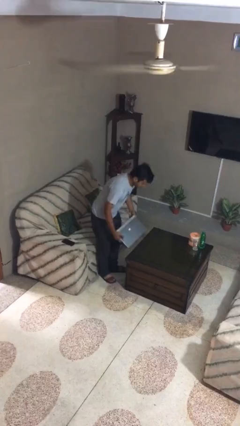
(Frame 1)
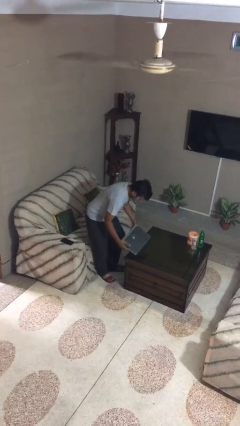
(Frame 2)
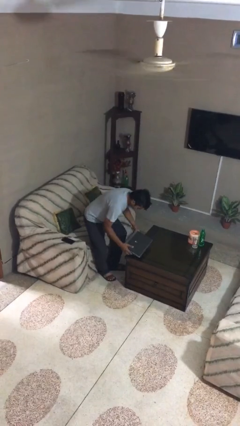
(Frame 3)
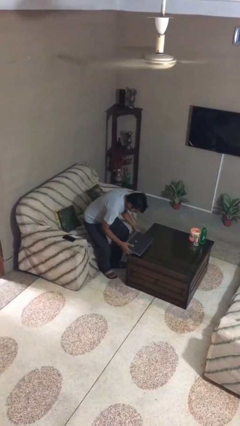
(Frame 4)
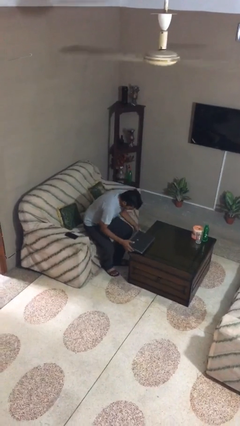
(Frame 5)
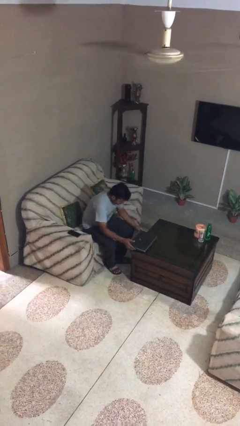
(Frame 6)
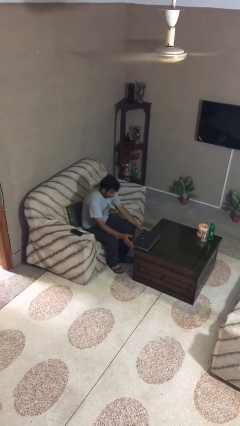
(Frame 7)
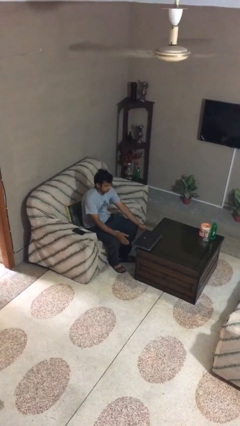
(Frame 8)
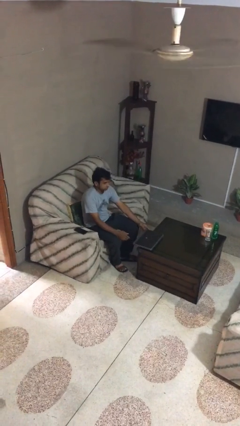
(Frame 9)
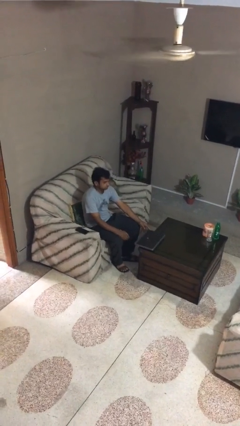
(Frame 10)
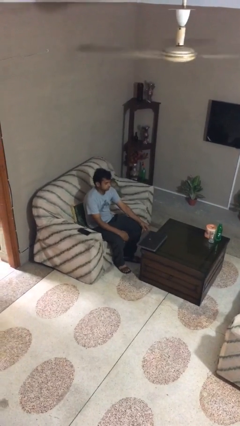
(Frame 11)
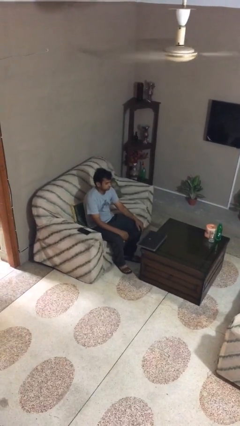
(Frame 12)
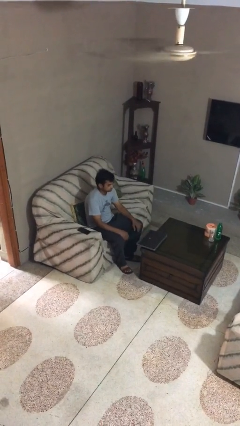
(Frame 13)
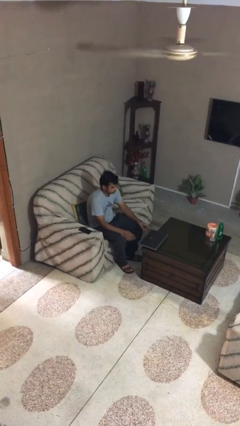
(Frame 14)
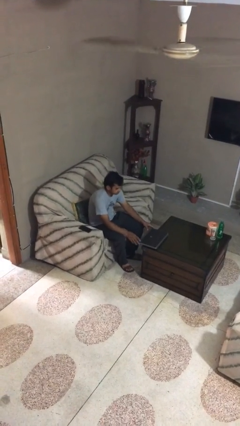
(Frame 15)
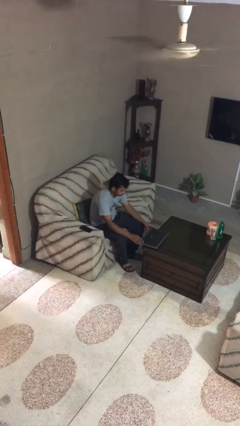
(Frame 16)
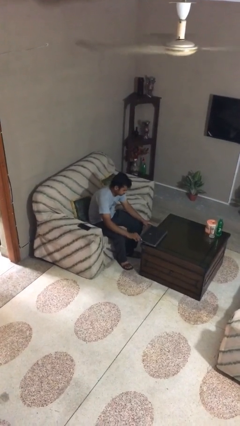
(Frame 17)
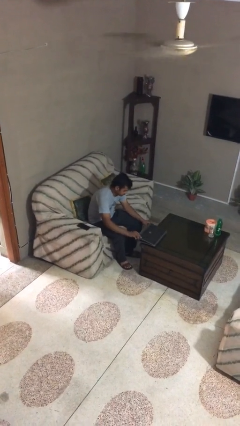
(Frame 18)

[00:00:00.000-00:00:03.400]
person sits down

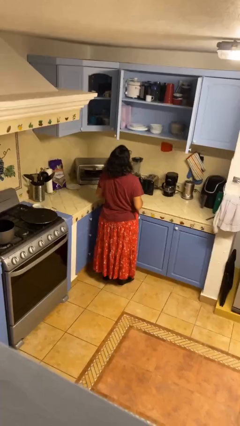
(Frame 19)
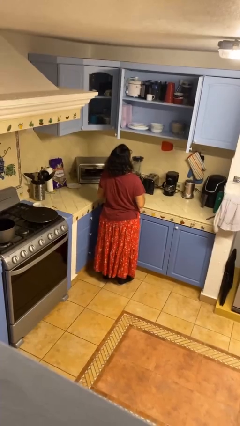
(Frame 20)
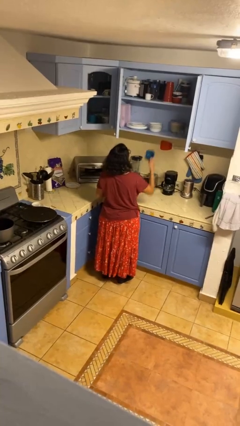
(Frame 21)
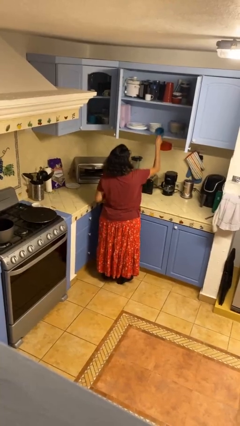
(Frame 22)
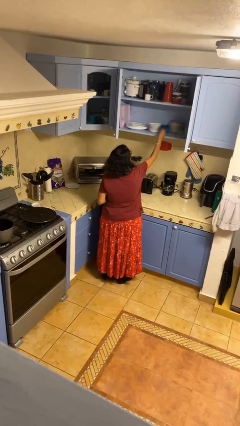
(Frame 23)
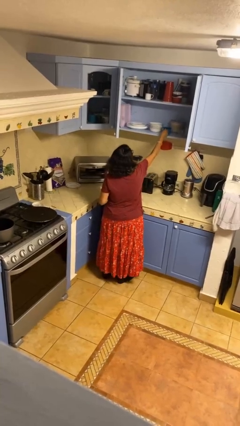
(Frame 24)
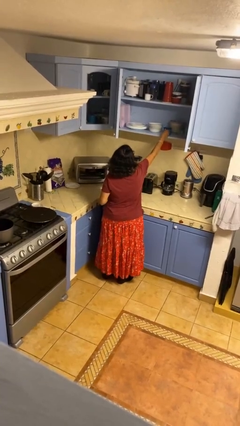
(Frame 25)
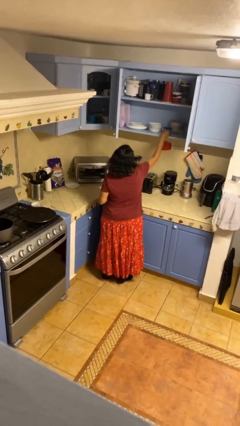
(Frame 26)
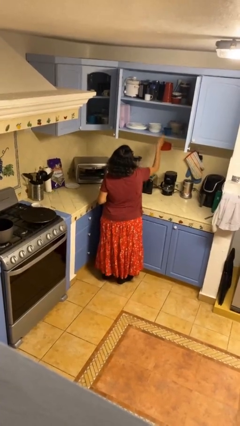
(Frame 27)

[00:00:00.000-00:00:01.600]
person puts down object into cabinet

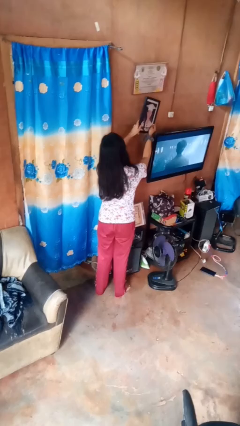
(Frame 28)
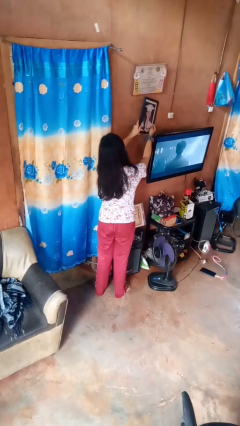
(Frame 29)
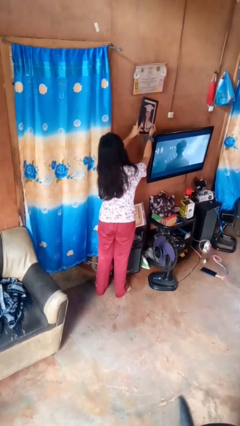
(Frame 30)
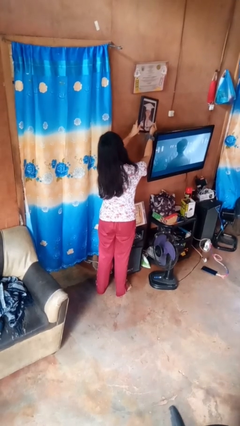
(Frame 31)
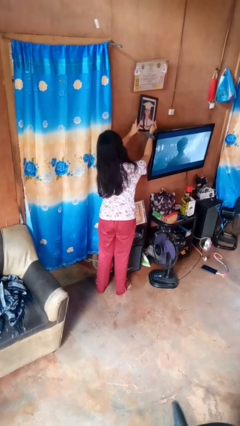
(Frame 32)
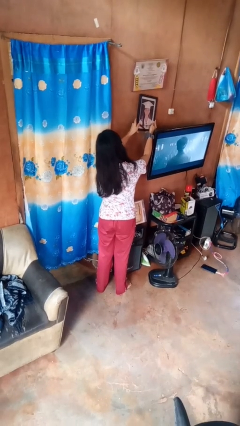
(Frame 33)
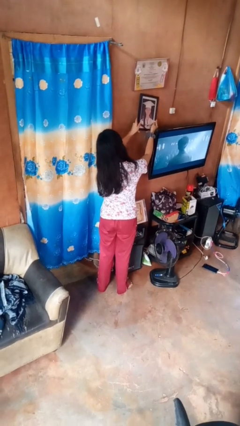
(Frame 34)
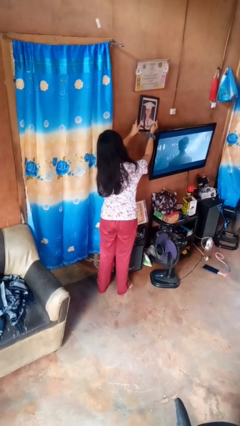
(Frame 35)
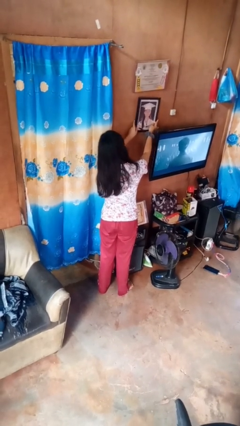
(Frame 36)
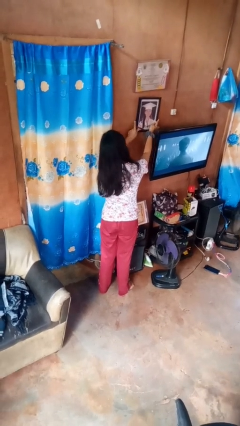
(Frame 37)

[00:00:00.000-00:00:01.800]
person puts up picture frame

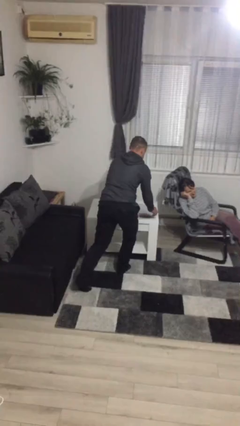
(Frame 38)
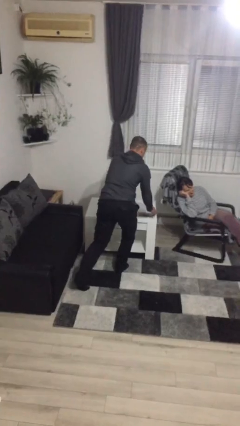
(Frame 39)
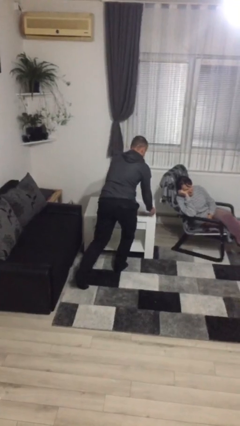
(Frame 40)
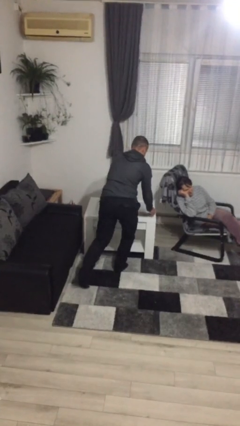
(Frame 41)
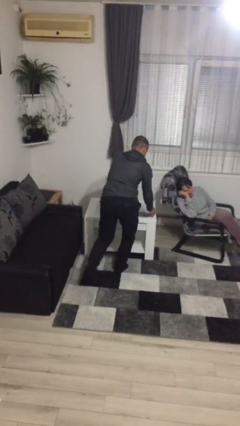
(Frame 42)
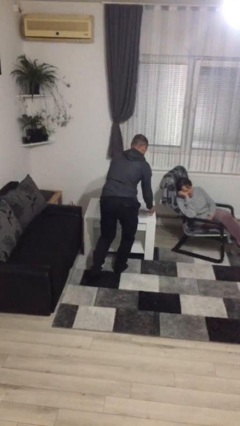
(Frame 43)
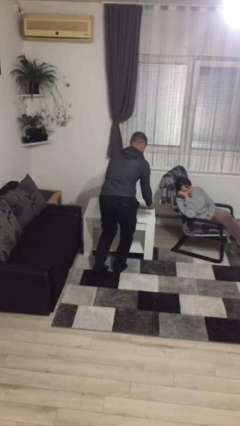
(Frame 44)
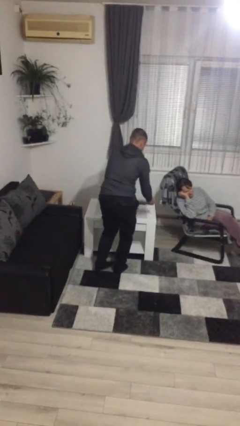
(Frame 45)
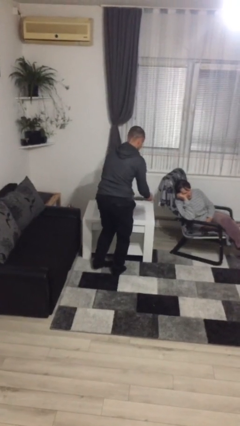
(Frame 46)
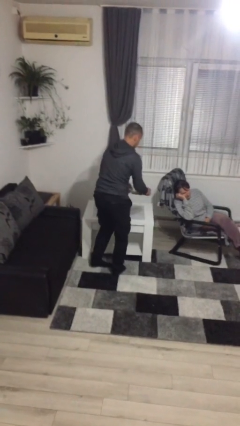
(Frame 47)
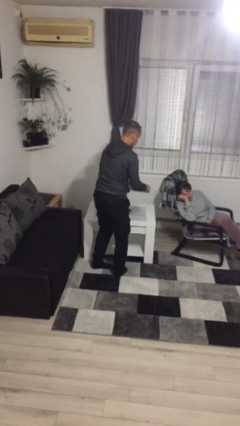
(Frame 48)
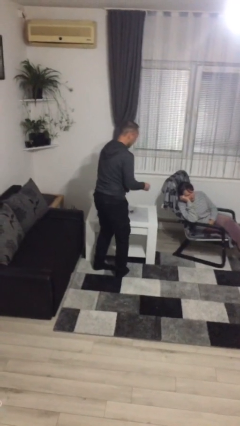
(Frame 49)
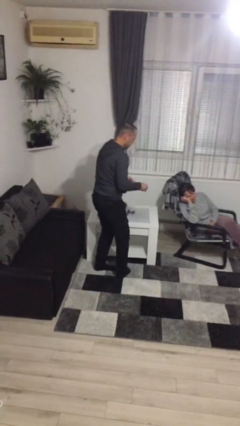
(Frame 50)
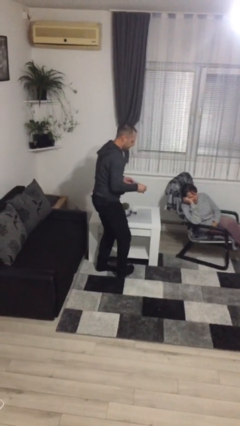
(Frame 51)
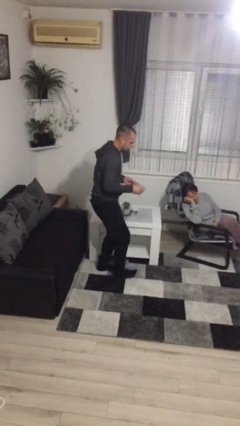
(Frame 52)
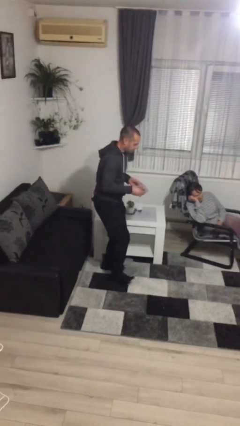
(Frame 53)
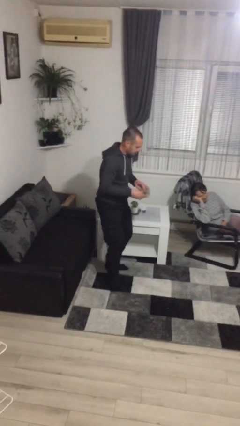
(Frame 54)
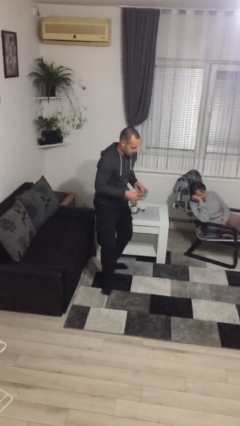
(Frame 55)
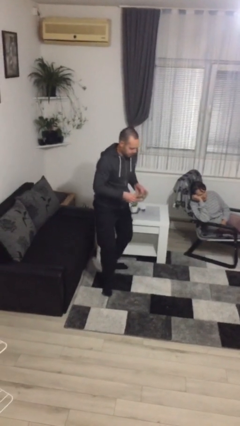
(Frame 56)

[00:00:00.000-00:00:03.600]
person steals object from person

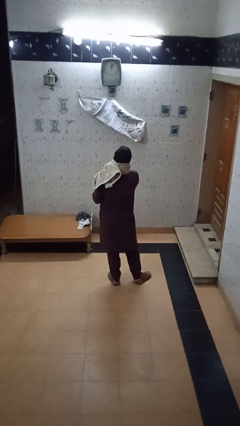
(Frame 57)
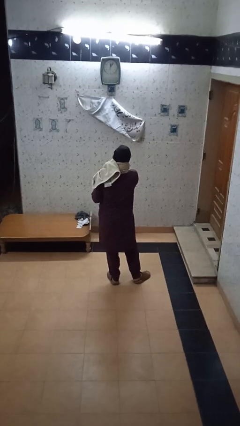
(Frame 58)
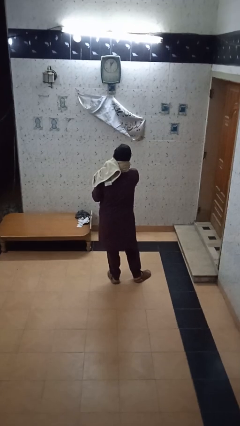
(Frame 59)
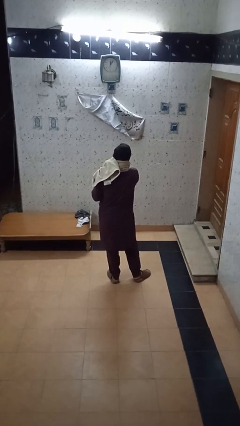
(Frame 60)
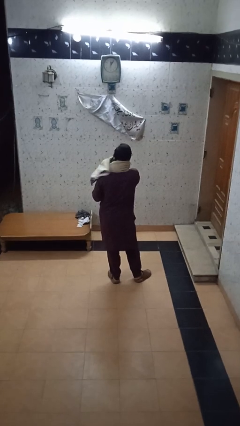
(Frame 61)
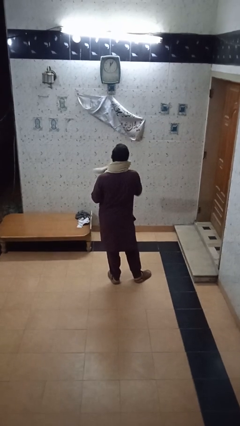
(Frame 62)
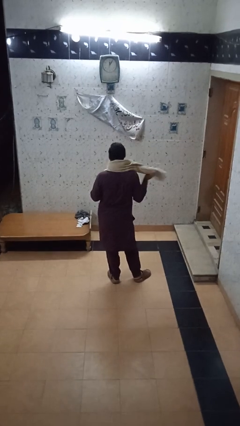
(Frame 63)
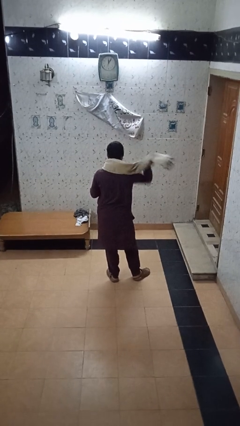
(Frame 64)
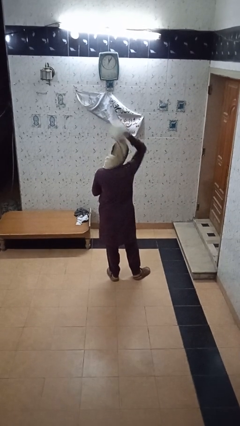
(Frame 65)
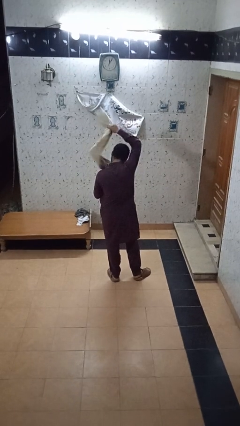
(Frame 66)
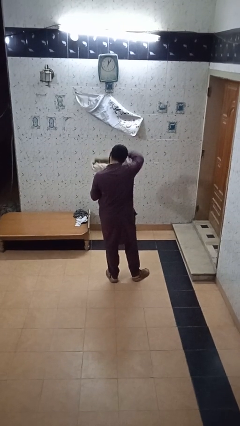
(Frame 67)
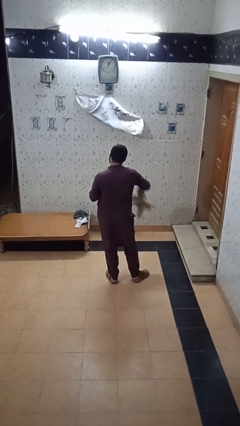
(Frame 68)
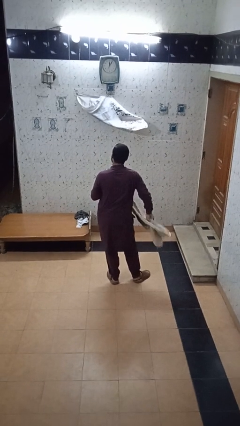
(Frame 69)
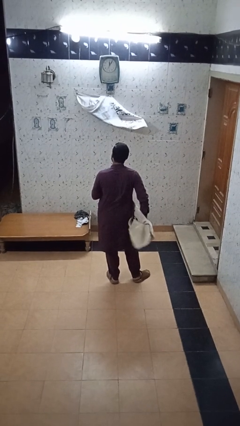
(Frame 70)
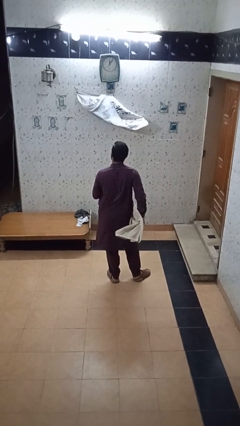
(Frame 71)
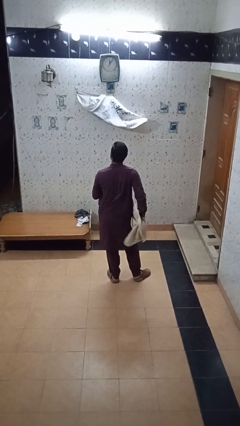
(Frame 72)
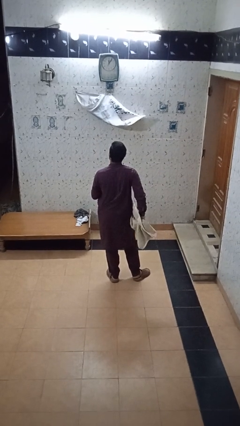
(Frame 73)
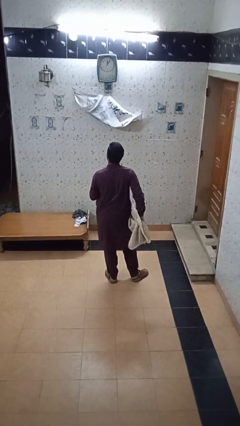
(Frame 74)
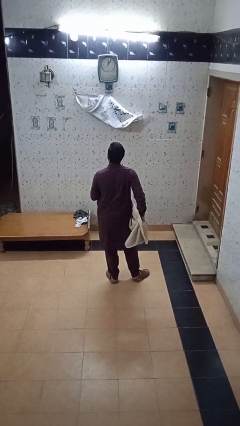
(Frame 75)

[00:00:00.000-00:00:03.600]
person takes off scarf

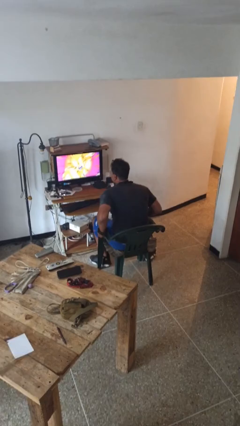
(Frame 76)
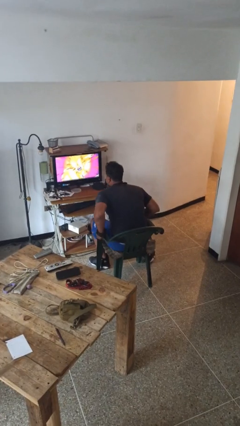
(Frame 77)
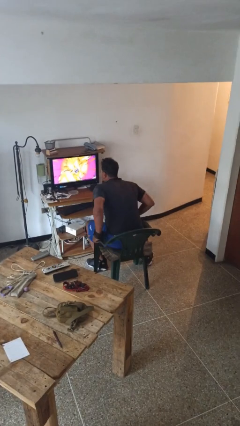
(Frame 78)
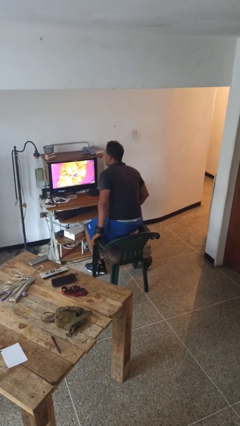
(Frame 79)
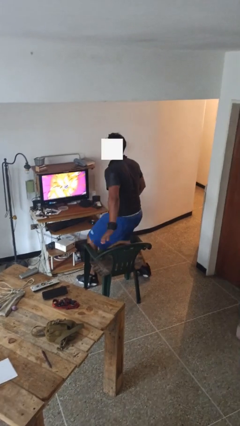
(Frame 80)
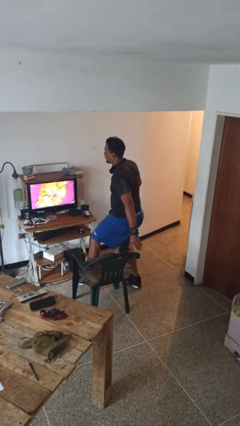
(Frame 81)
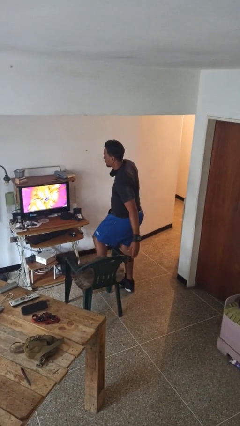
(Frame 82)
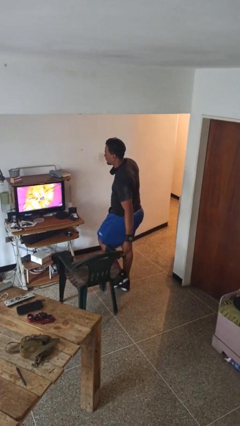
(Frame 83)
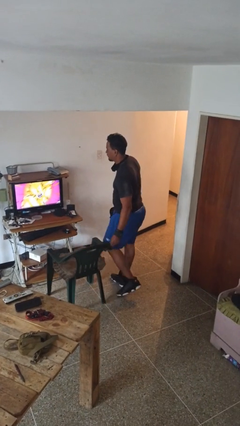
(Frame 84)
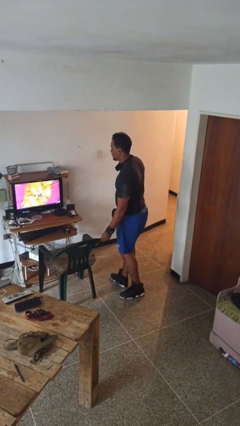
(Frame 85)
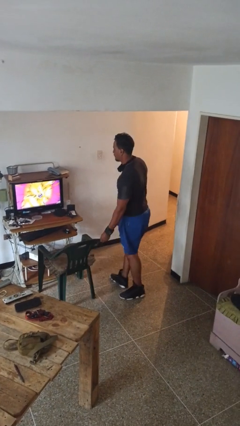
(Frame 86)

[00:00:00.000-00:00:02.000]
person stands up

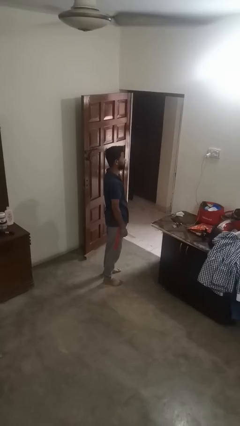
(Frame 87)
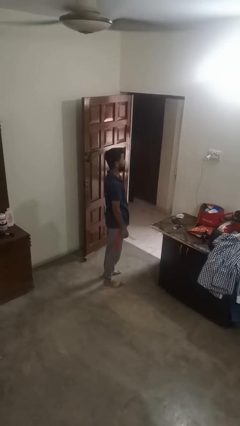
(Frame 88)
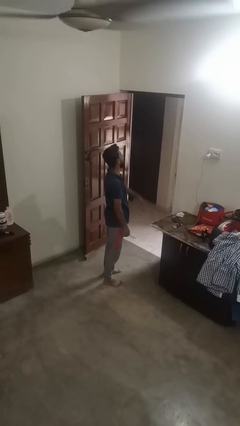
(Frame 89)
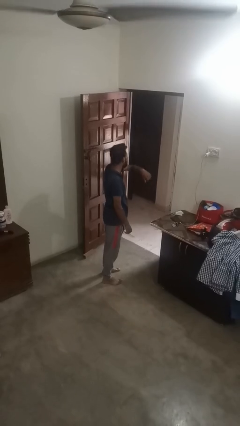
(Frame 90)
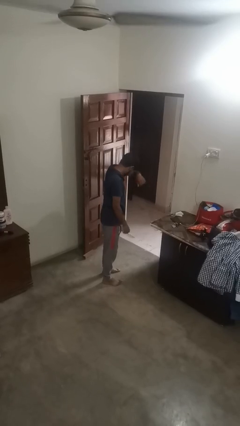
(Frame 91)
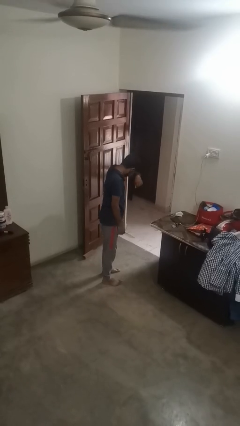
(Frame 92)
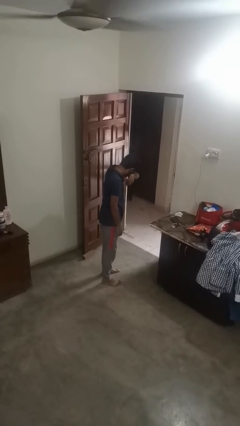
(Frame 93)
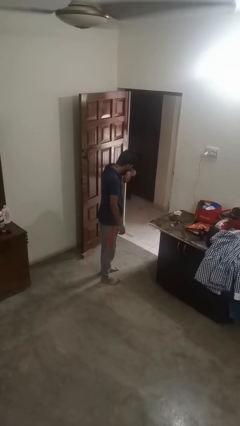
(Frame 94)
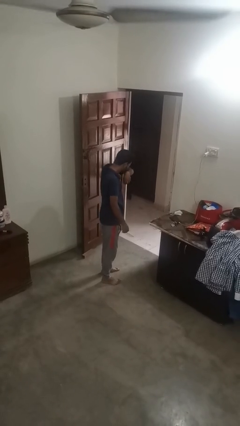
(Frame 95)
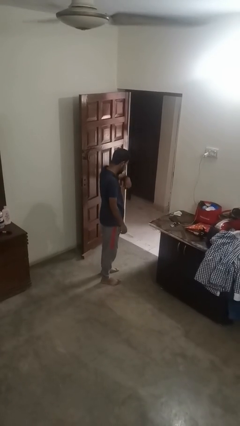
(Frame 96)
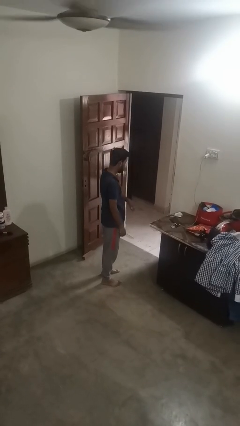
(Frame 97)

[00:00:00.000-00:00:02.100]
person sneezes into arm
